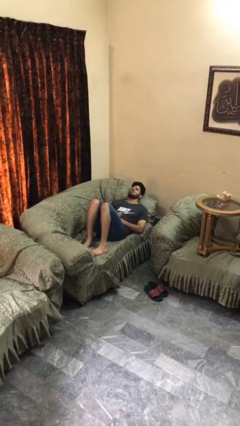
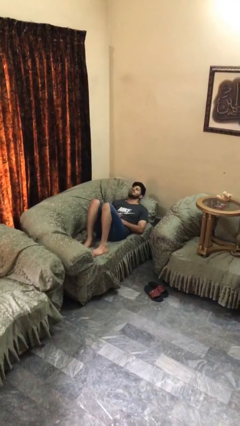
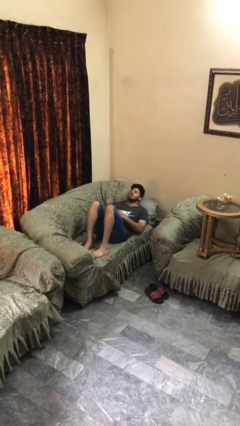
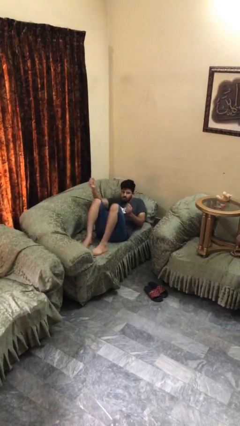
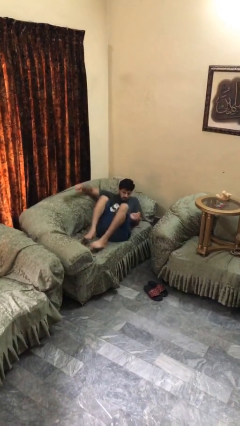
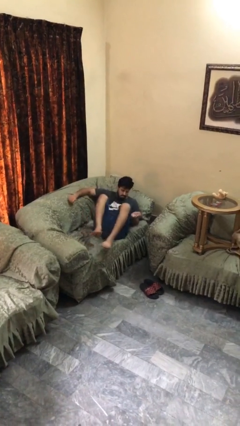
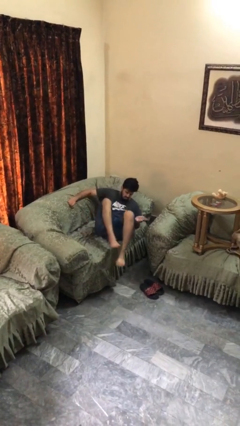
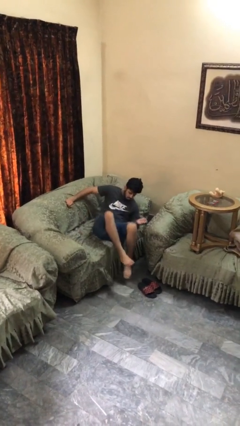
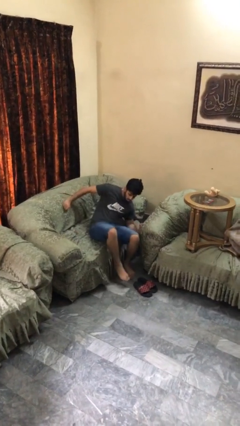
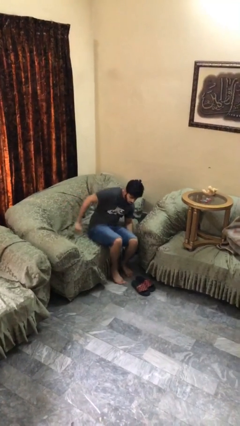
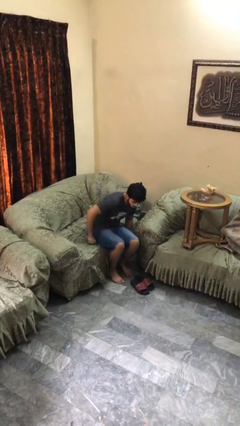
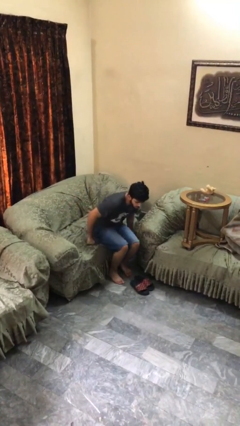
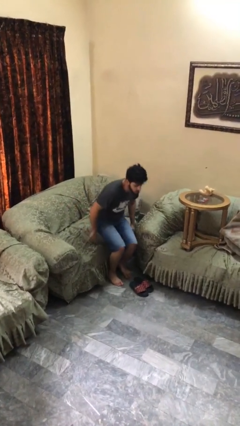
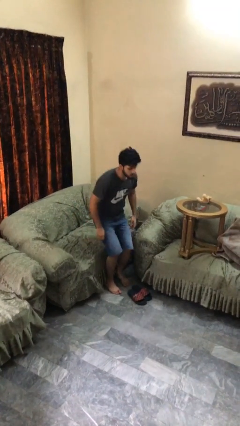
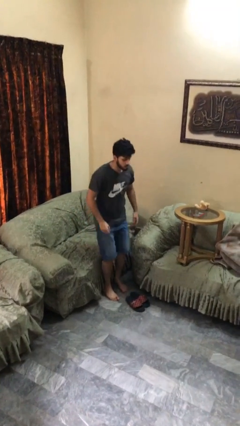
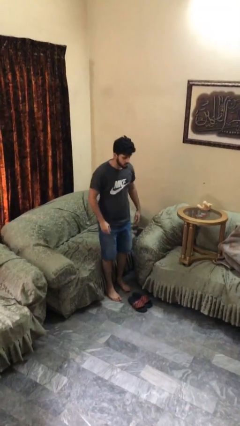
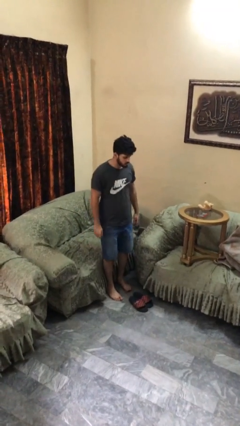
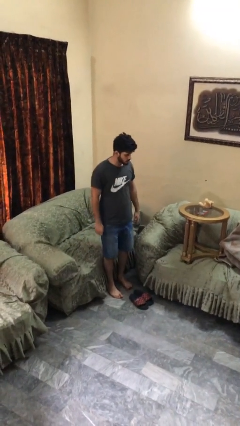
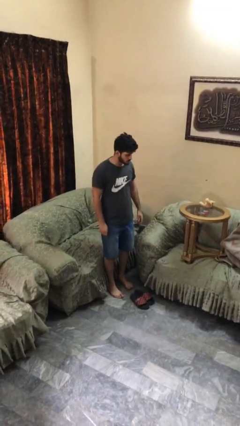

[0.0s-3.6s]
person stands up

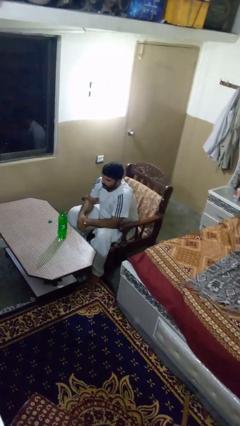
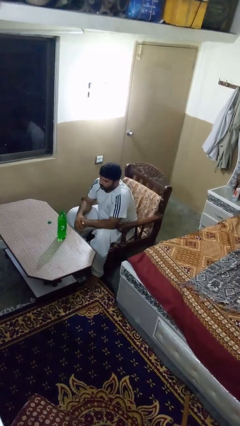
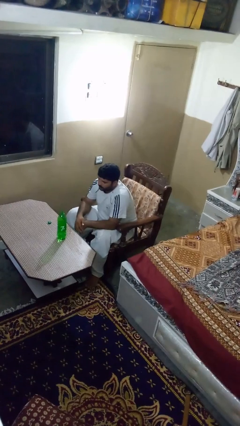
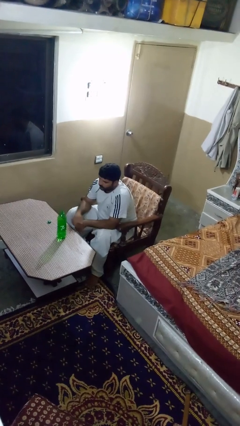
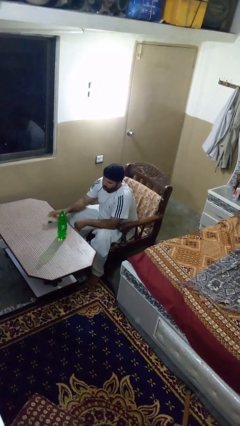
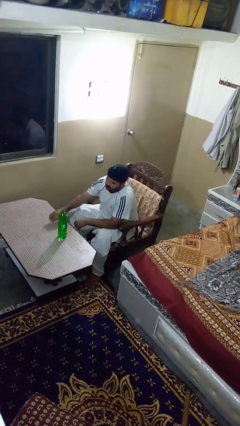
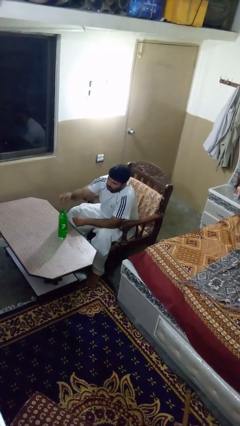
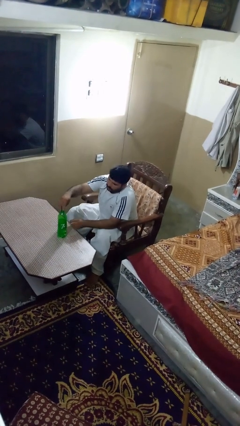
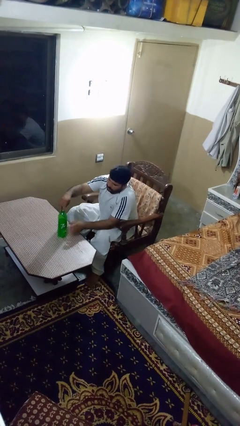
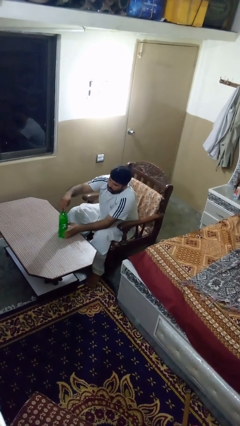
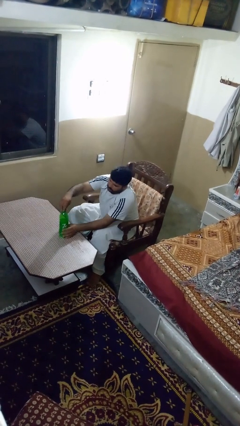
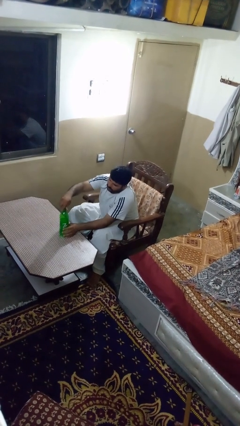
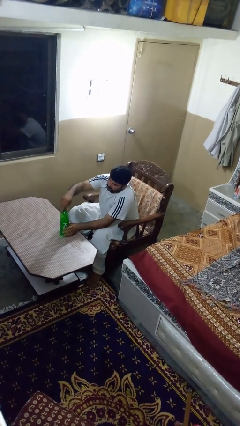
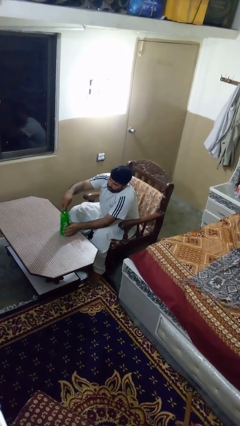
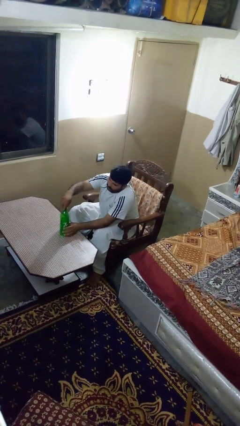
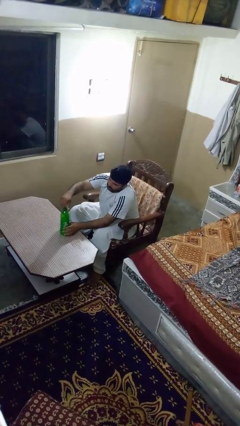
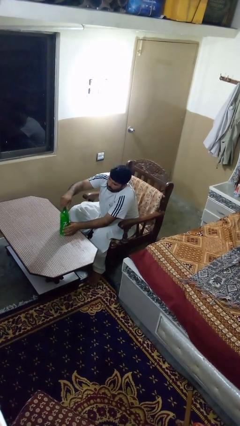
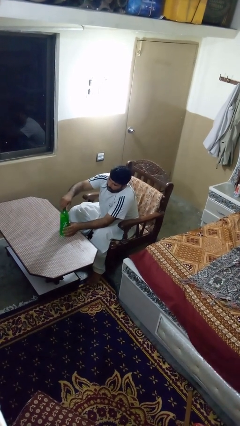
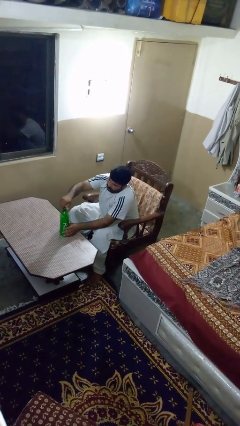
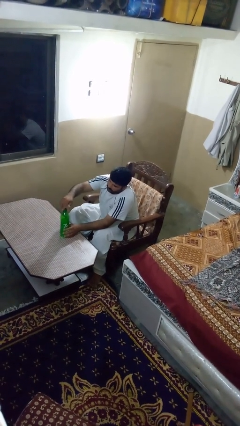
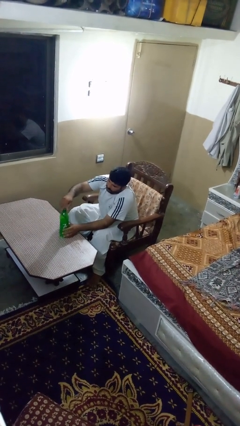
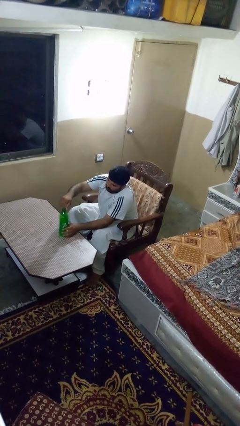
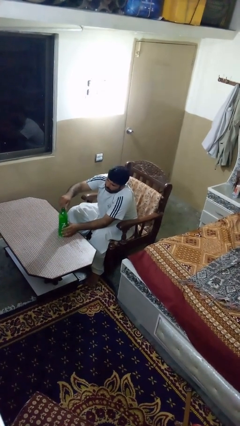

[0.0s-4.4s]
person screws lid to bottle

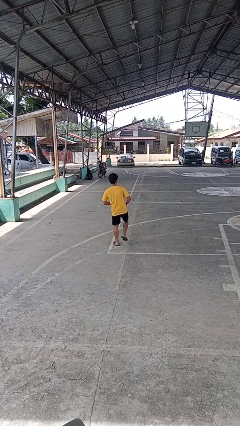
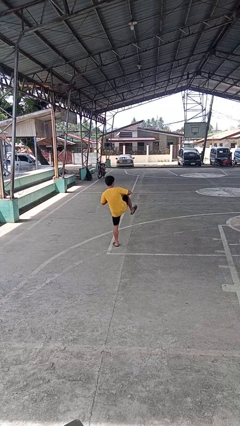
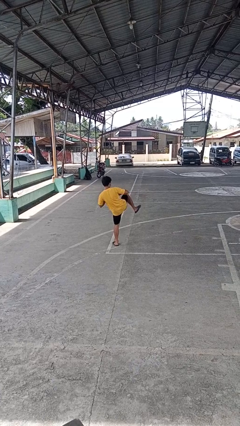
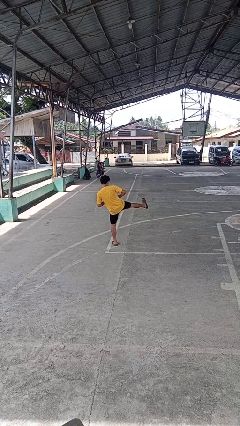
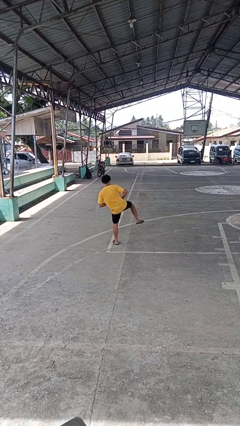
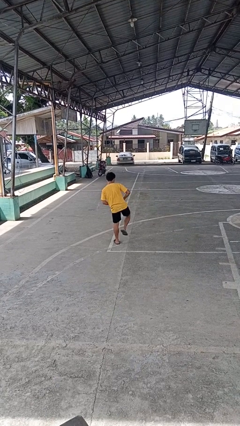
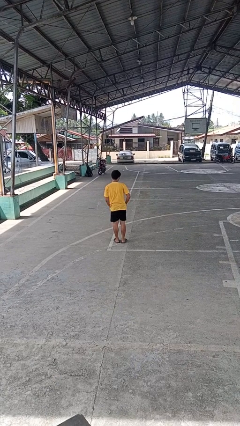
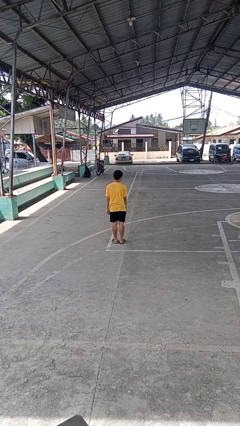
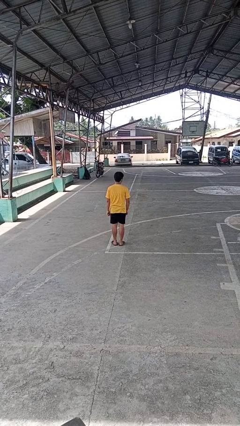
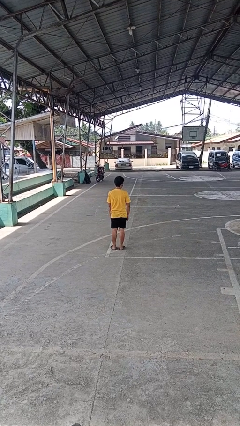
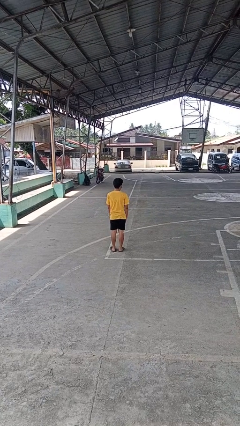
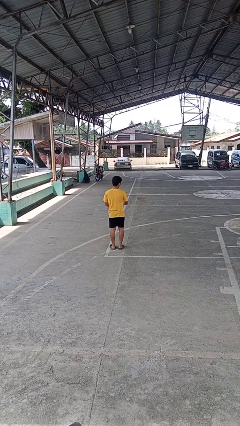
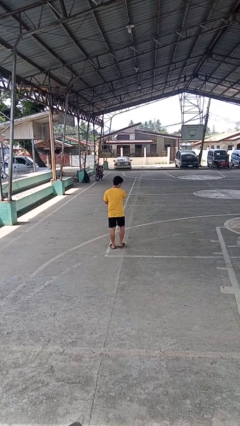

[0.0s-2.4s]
person karate kicks

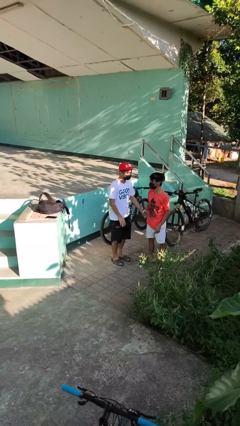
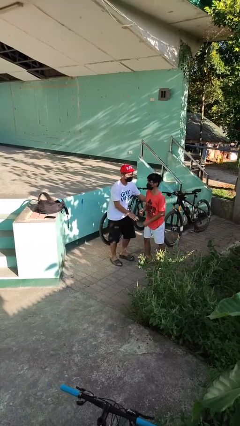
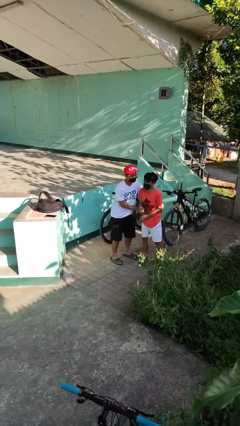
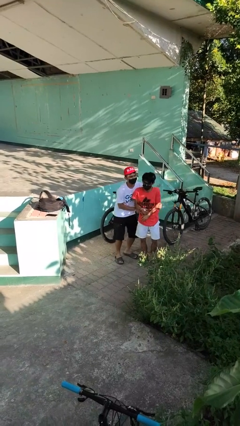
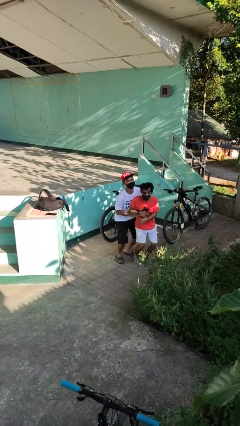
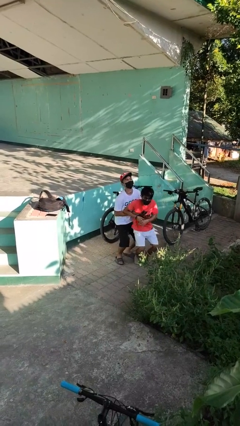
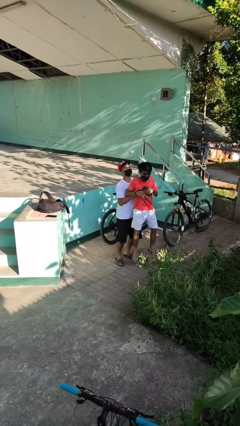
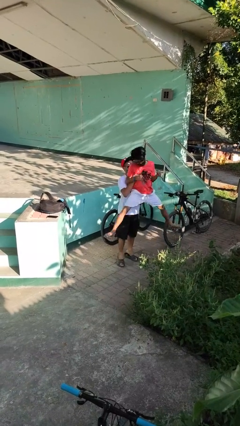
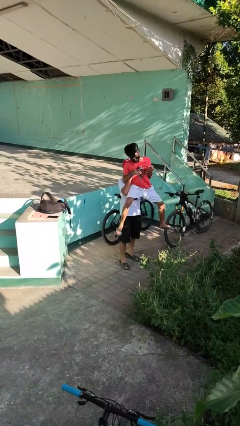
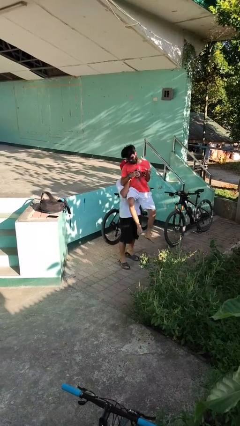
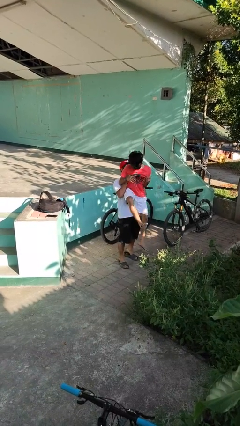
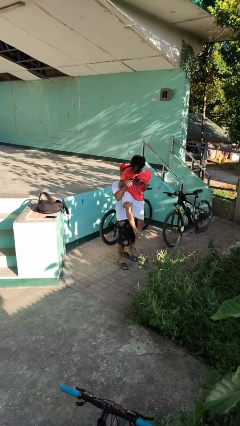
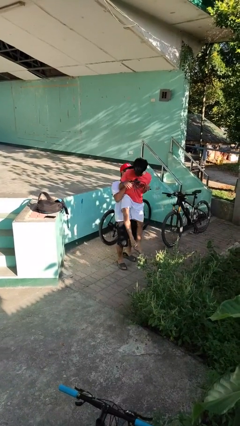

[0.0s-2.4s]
person picks up person

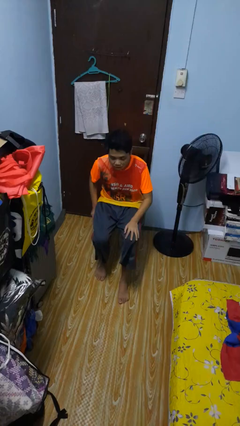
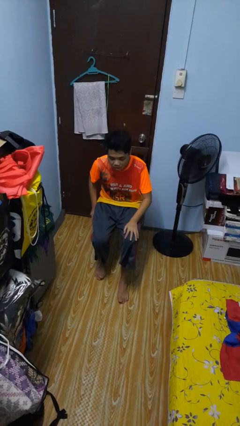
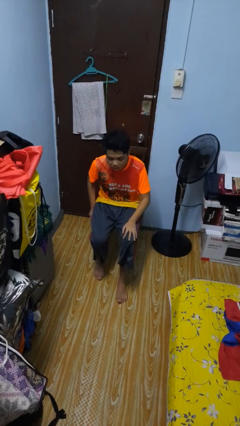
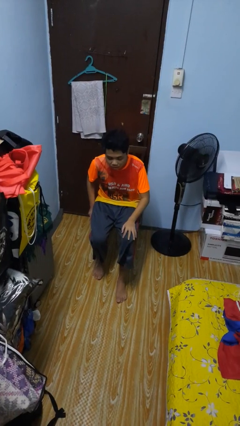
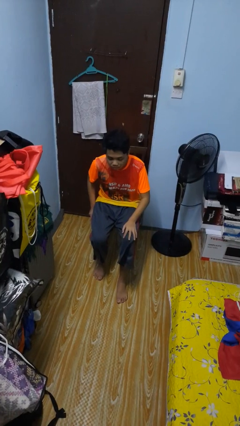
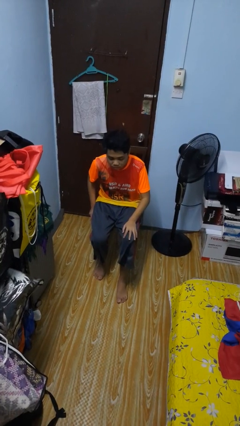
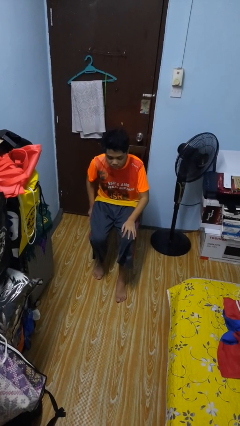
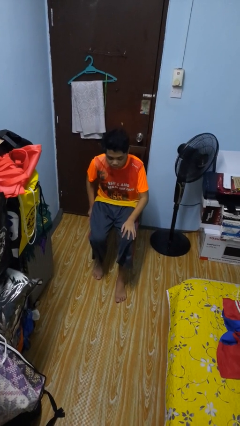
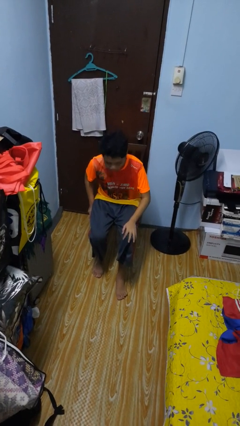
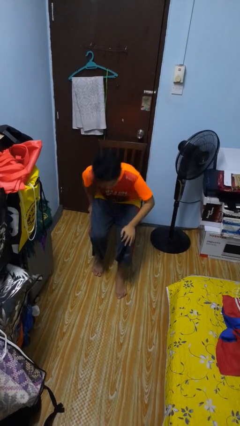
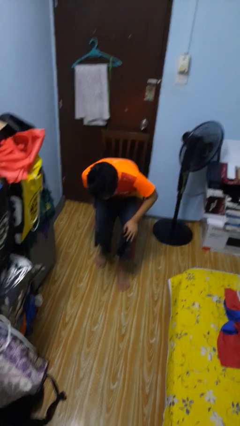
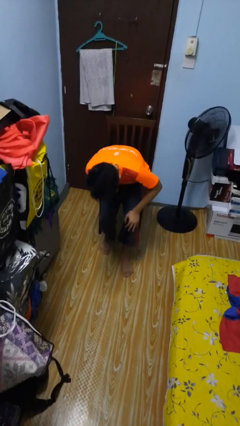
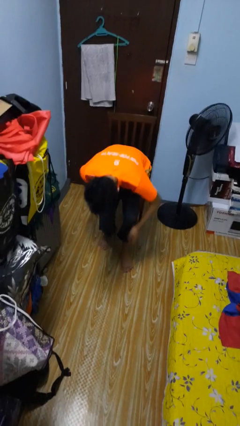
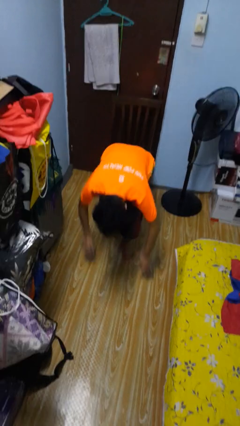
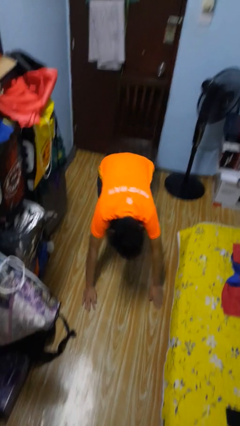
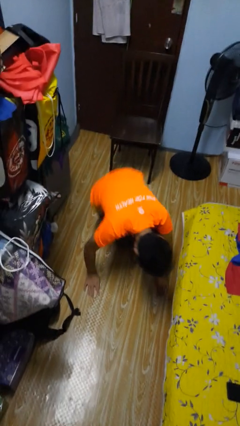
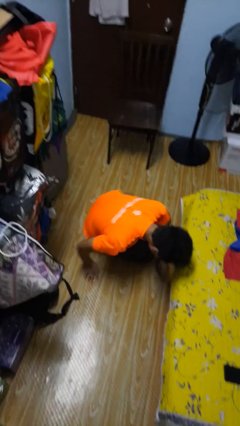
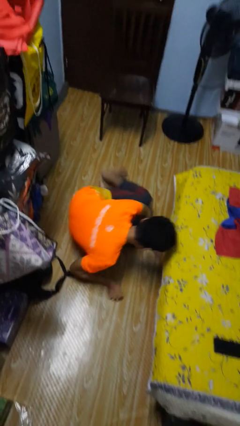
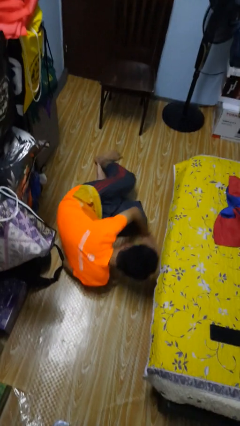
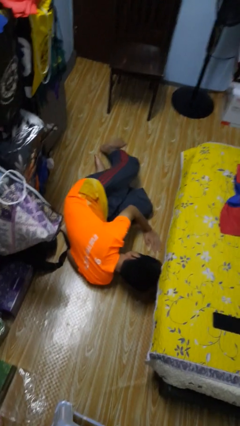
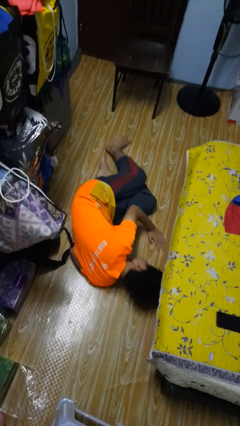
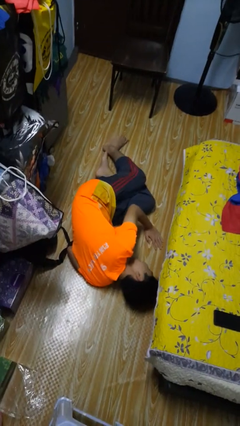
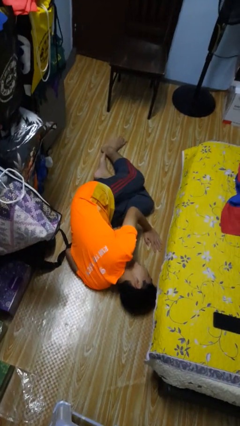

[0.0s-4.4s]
person falls from chair

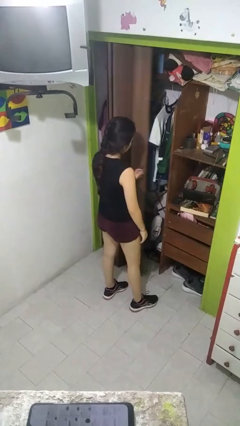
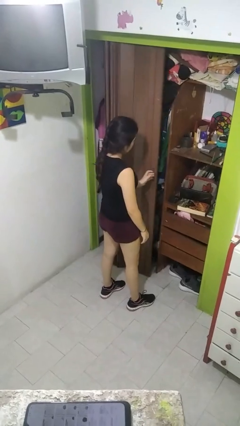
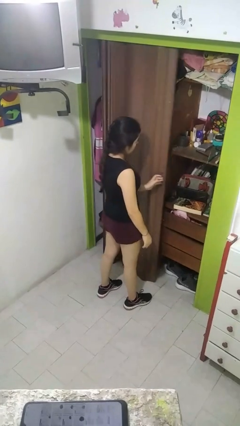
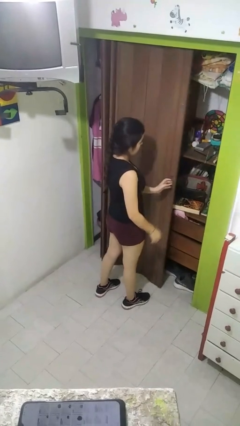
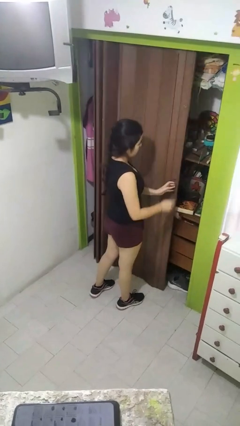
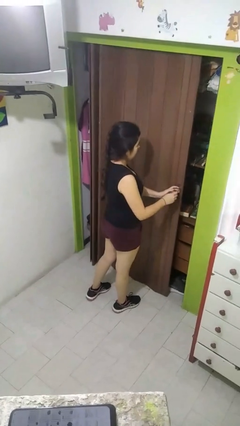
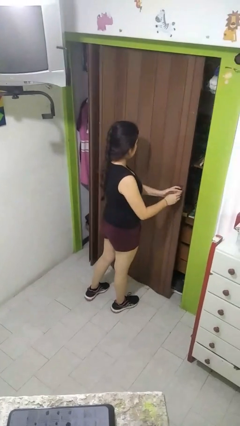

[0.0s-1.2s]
person closes closet door
